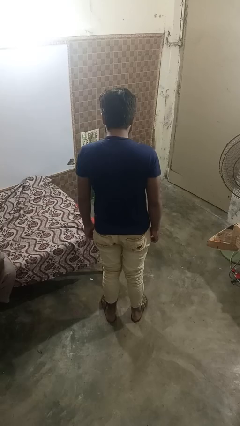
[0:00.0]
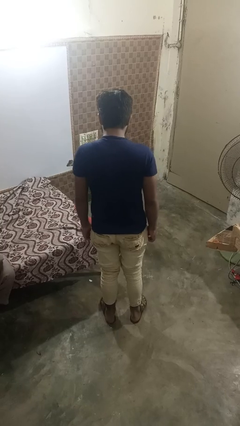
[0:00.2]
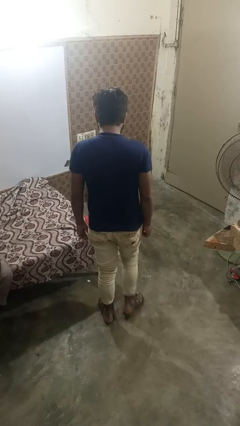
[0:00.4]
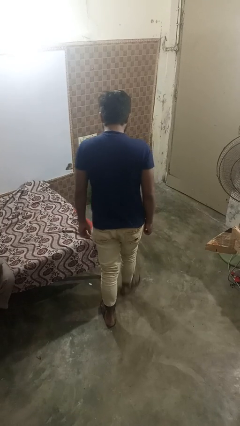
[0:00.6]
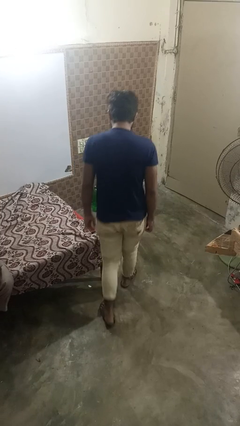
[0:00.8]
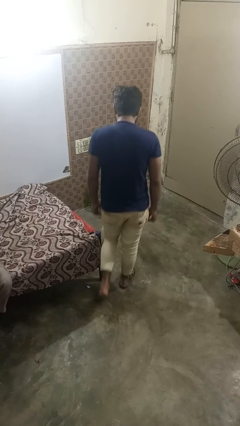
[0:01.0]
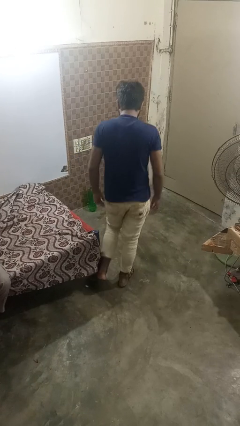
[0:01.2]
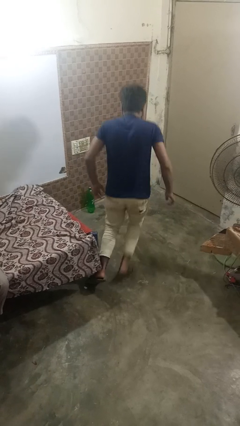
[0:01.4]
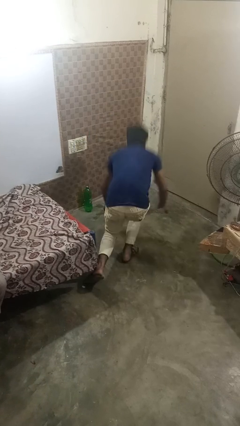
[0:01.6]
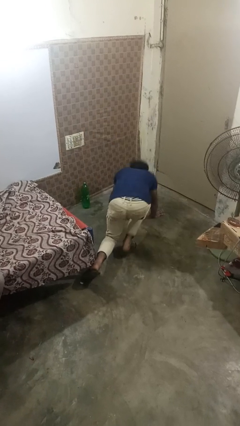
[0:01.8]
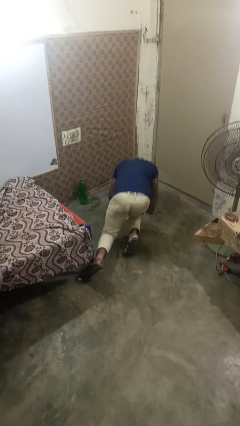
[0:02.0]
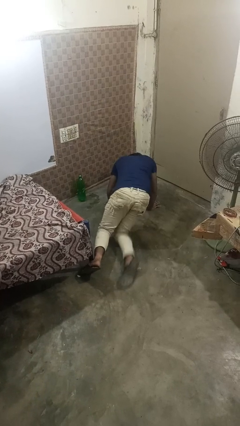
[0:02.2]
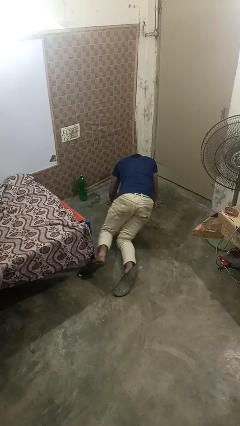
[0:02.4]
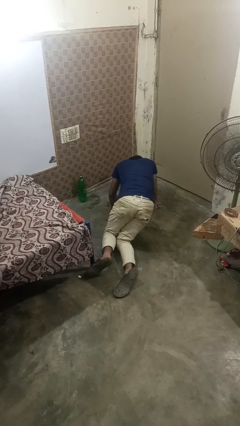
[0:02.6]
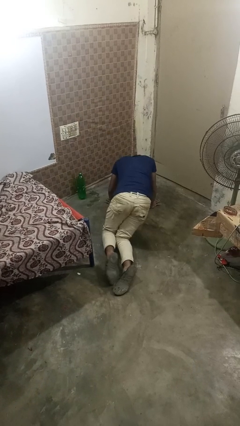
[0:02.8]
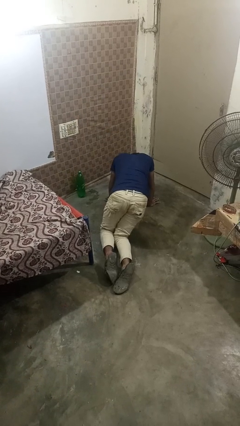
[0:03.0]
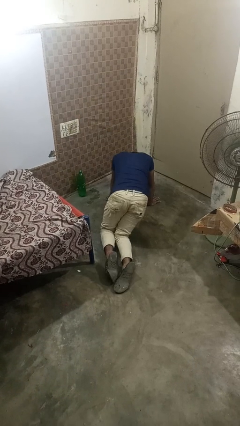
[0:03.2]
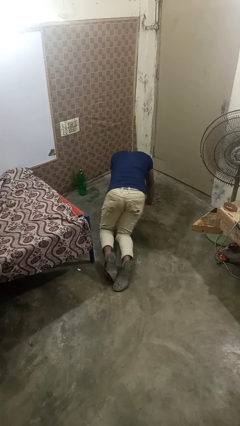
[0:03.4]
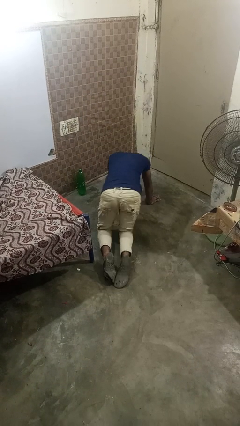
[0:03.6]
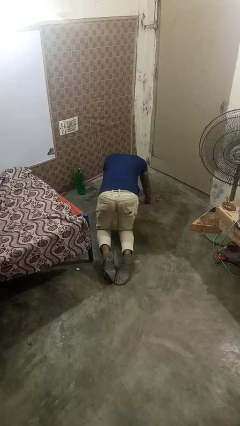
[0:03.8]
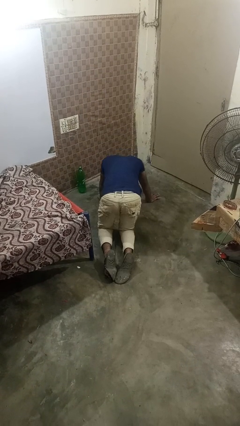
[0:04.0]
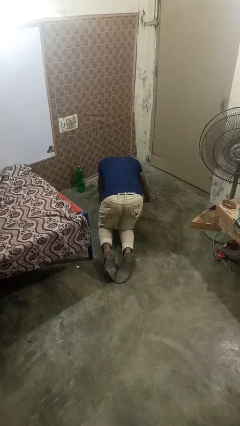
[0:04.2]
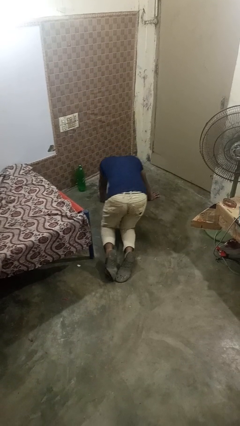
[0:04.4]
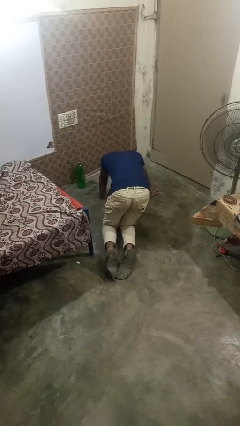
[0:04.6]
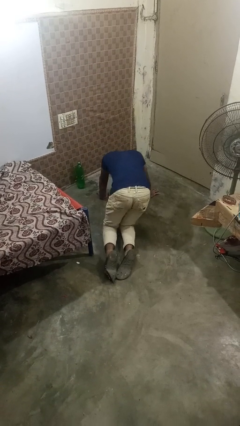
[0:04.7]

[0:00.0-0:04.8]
person trips on object on floor

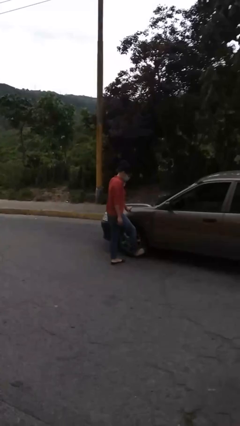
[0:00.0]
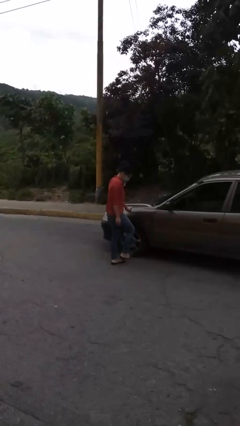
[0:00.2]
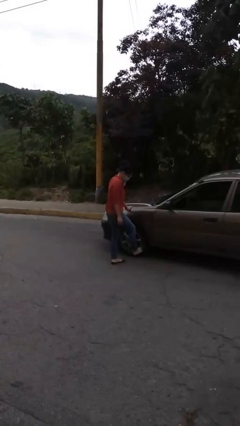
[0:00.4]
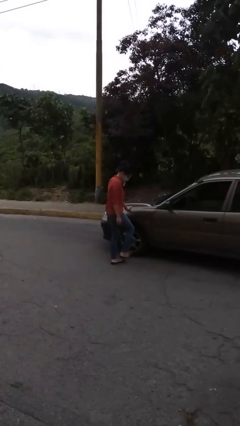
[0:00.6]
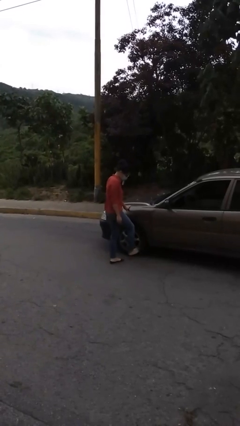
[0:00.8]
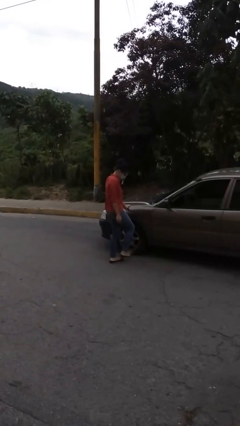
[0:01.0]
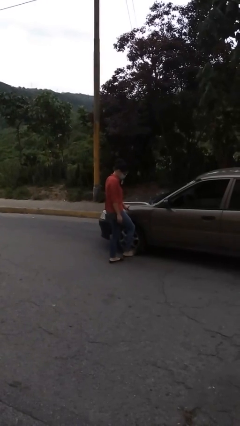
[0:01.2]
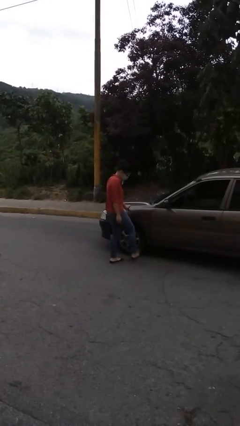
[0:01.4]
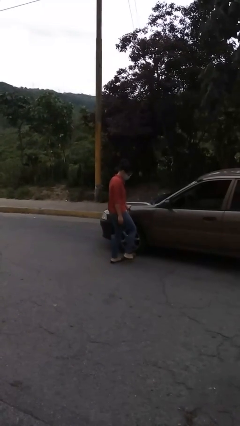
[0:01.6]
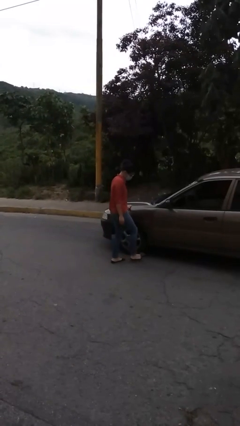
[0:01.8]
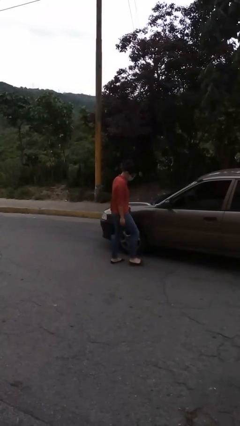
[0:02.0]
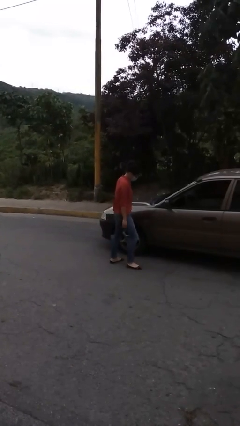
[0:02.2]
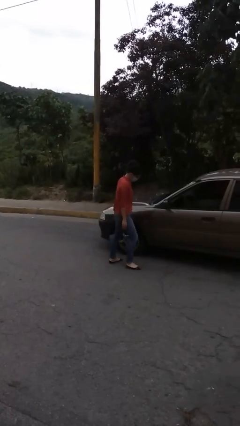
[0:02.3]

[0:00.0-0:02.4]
person kicks car tires

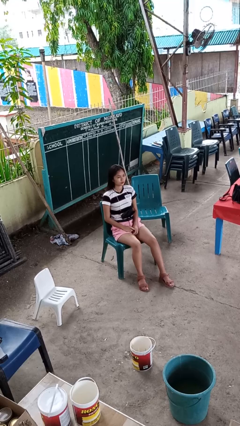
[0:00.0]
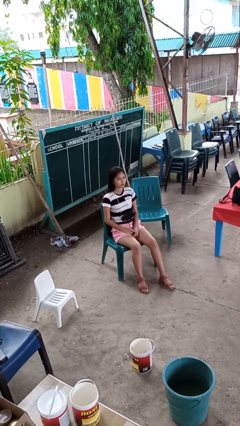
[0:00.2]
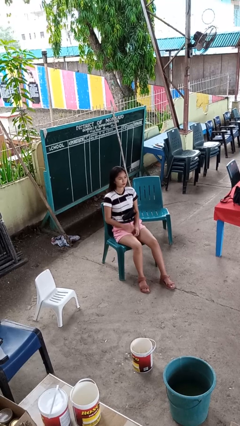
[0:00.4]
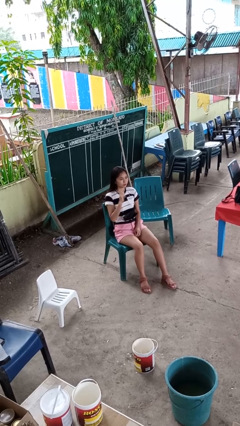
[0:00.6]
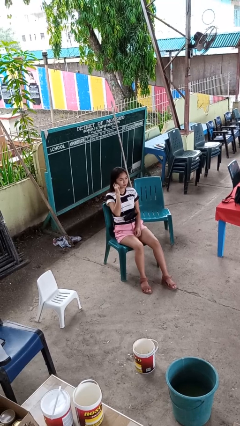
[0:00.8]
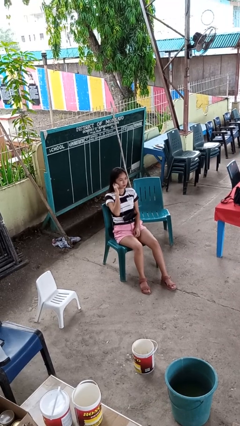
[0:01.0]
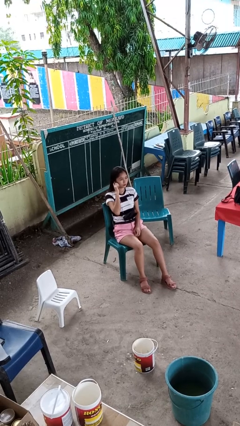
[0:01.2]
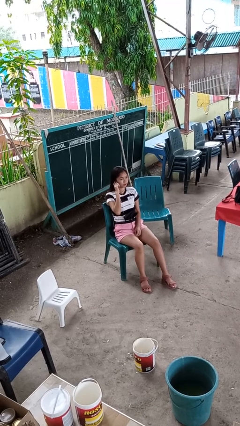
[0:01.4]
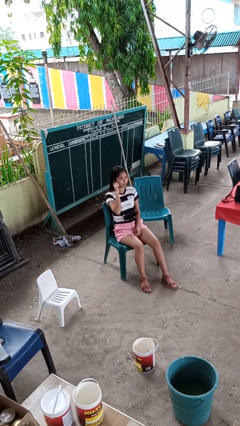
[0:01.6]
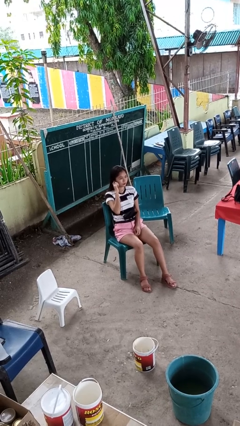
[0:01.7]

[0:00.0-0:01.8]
person gestures listen closely

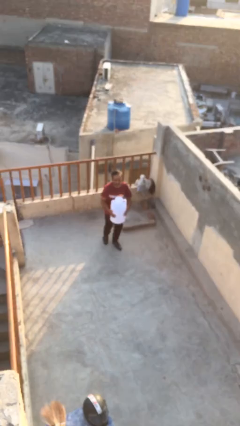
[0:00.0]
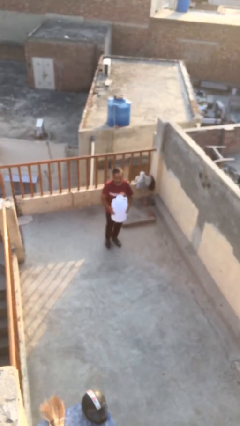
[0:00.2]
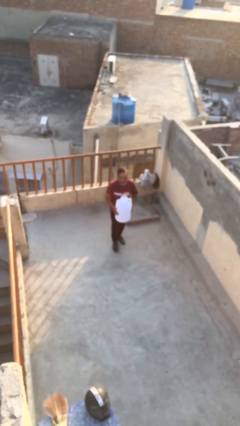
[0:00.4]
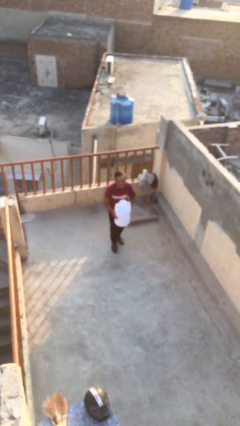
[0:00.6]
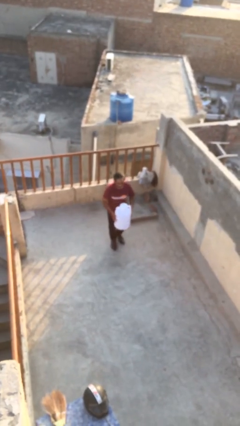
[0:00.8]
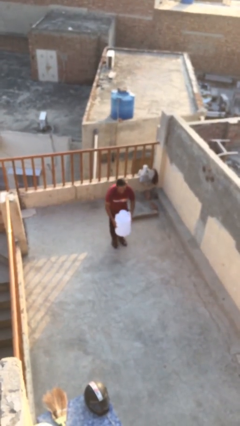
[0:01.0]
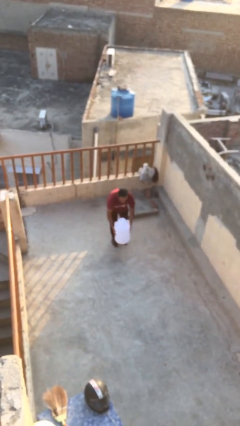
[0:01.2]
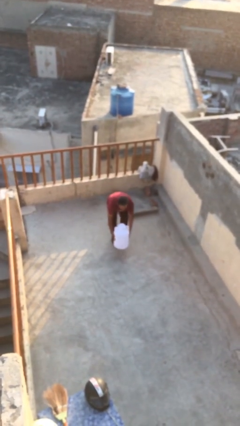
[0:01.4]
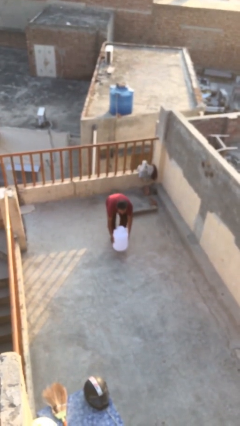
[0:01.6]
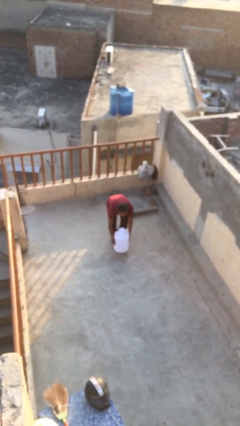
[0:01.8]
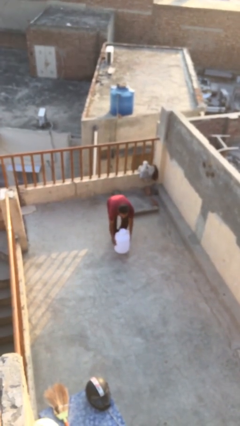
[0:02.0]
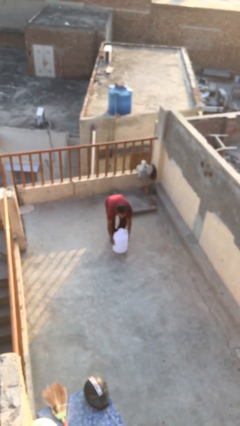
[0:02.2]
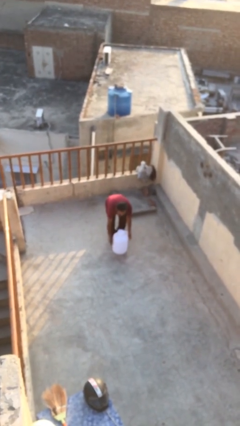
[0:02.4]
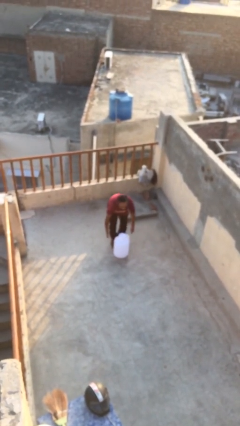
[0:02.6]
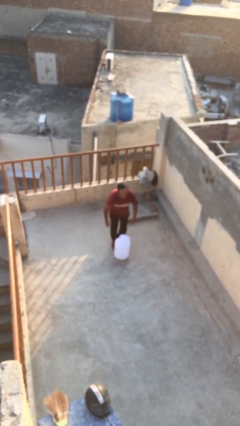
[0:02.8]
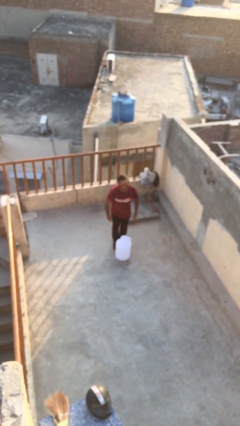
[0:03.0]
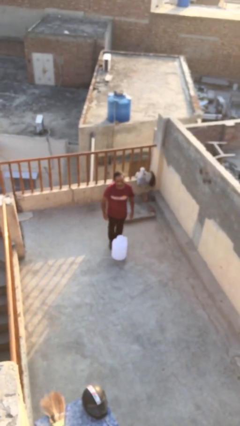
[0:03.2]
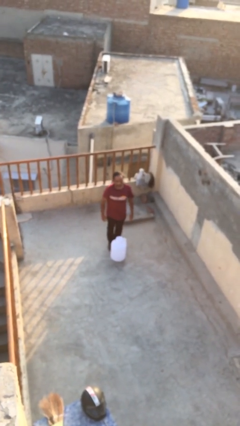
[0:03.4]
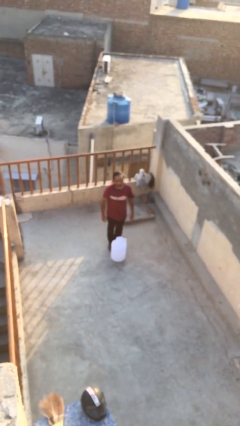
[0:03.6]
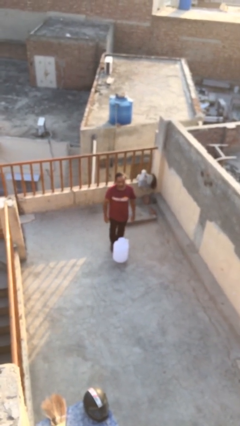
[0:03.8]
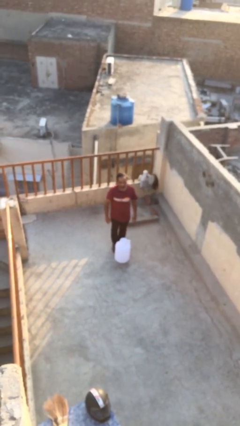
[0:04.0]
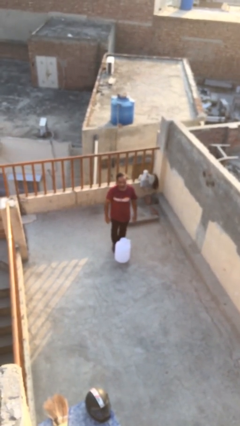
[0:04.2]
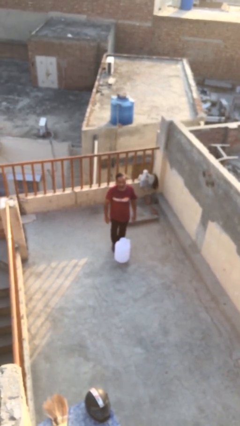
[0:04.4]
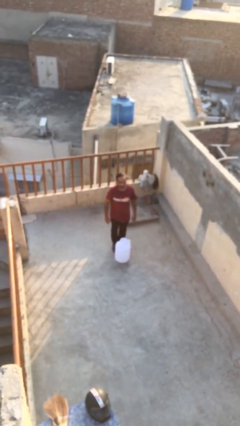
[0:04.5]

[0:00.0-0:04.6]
person puts down object on floor

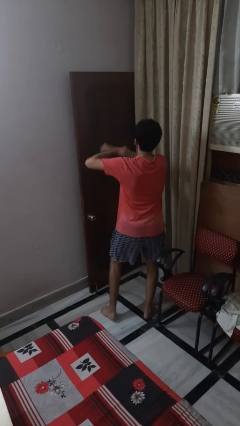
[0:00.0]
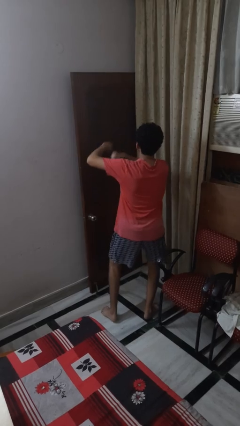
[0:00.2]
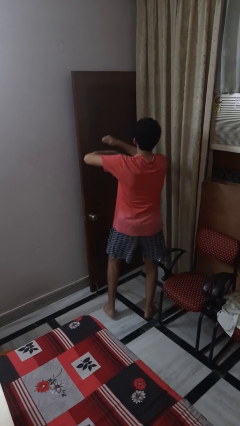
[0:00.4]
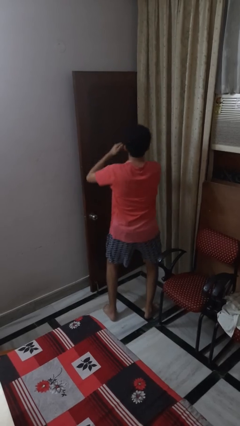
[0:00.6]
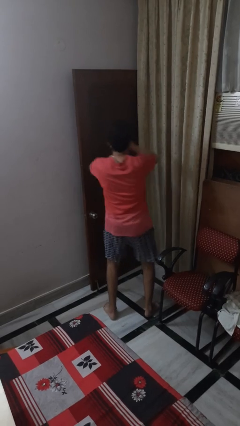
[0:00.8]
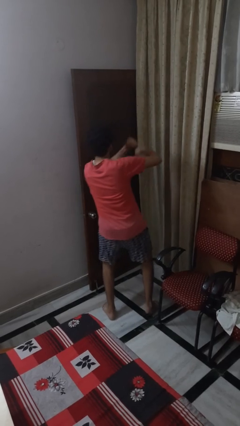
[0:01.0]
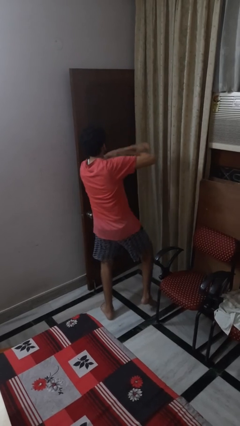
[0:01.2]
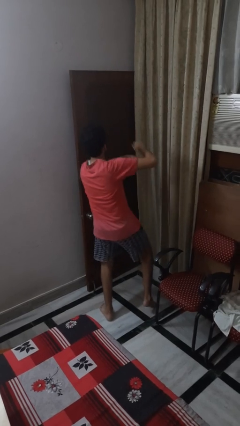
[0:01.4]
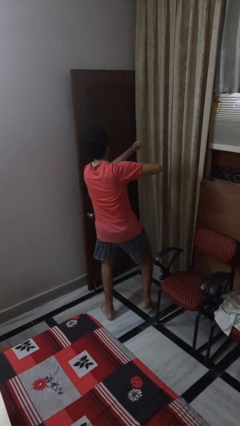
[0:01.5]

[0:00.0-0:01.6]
person dances in place

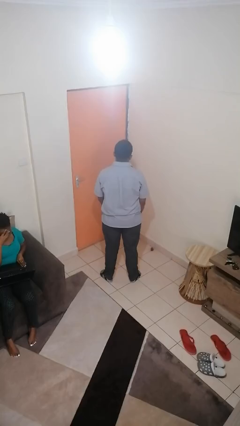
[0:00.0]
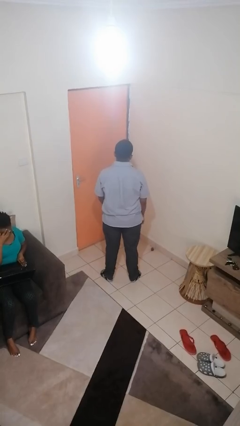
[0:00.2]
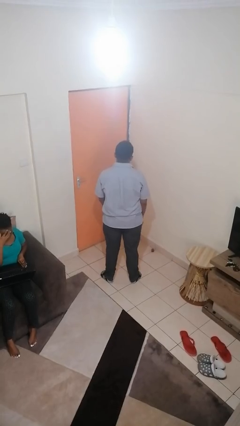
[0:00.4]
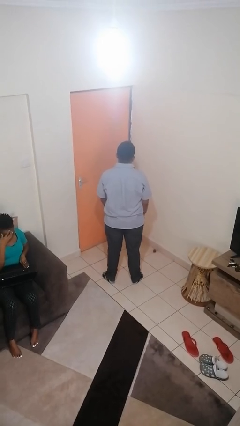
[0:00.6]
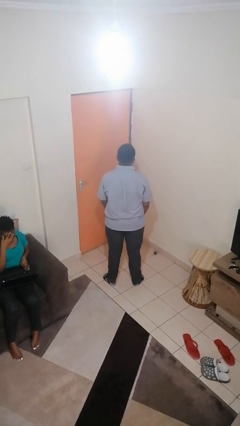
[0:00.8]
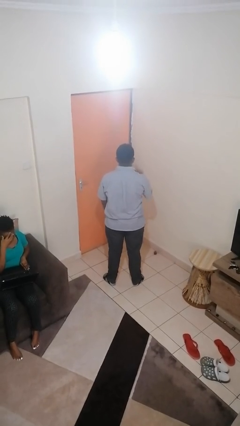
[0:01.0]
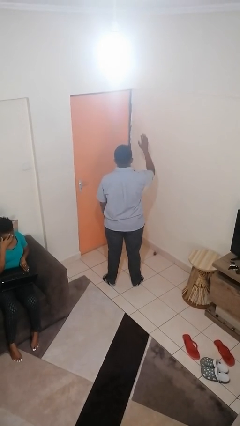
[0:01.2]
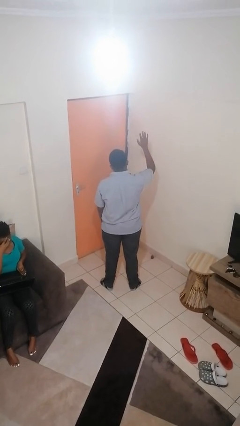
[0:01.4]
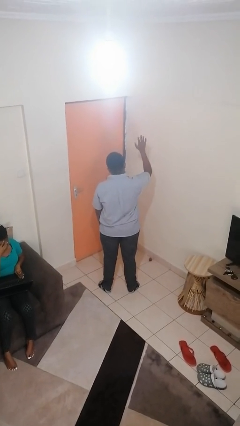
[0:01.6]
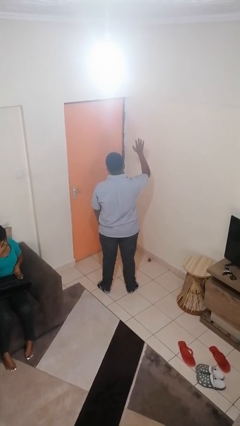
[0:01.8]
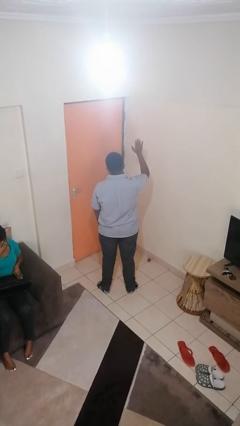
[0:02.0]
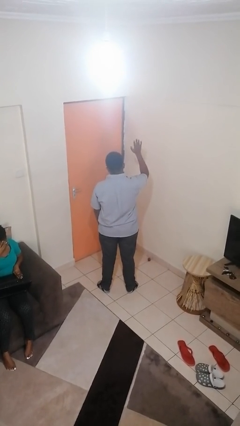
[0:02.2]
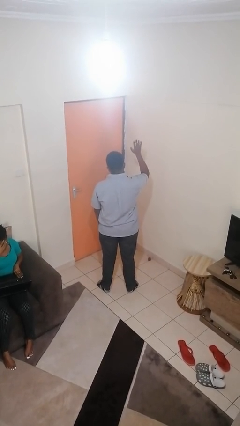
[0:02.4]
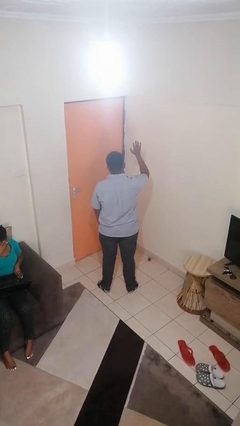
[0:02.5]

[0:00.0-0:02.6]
person gestures raise hand
